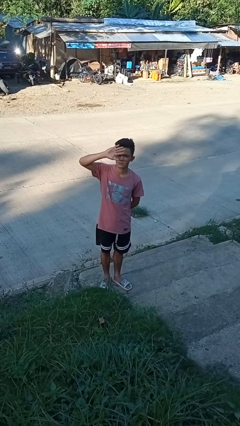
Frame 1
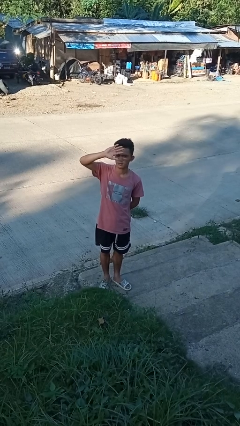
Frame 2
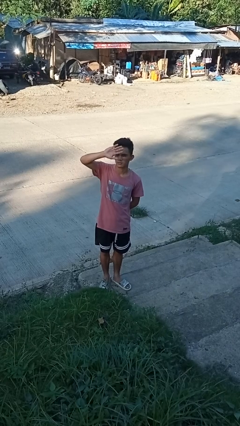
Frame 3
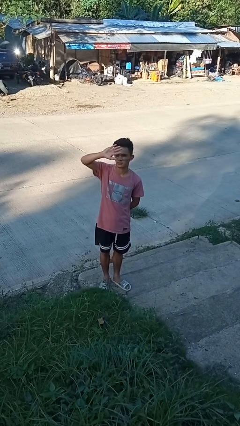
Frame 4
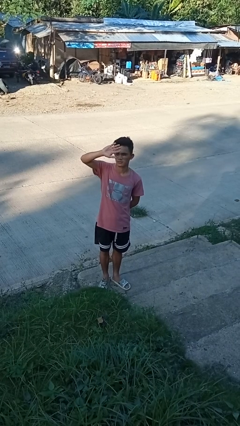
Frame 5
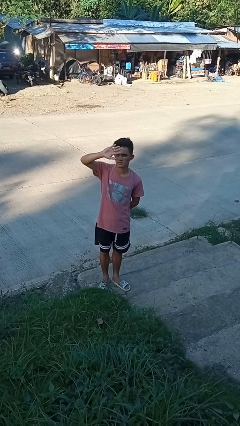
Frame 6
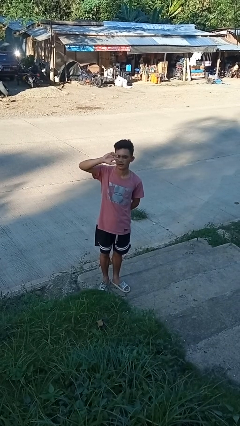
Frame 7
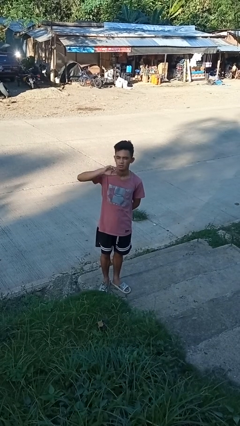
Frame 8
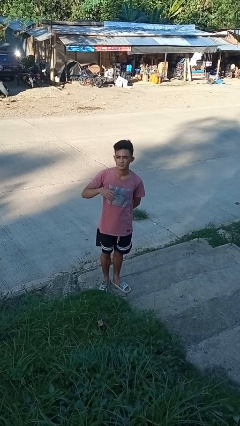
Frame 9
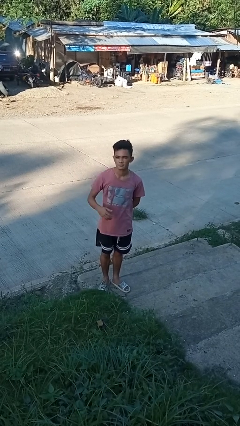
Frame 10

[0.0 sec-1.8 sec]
person shades eyes

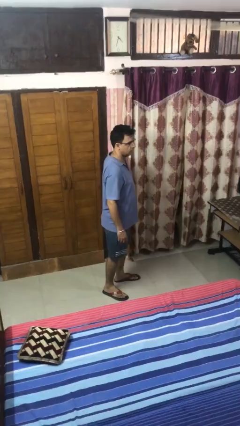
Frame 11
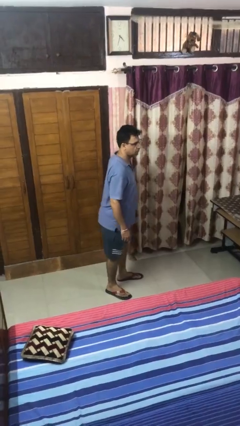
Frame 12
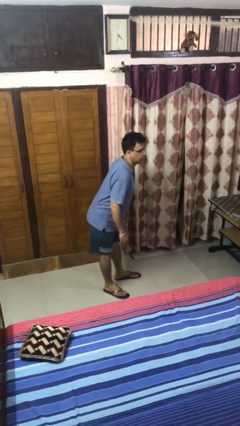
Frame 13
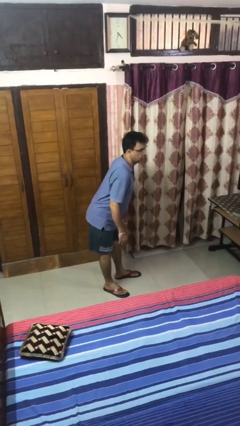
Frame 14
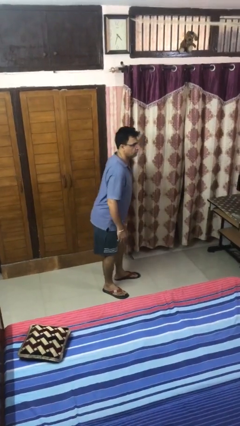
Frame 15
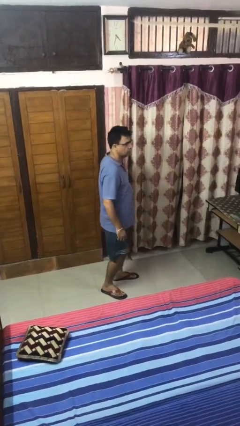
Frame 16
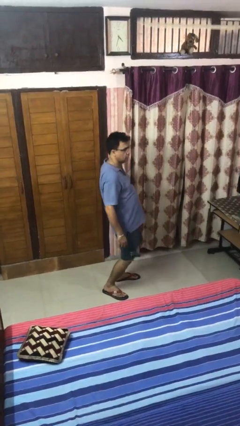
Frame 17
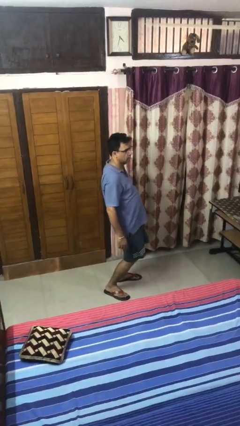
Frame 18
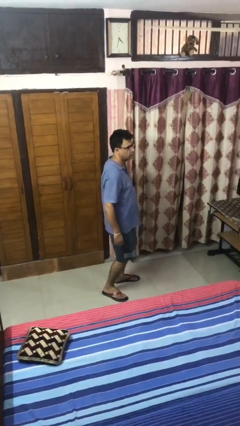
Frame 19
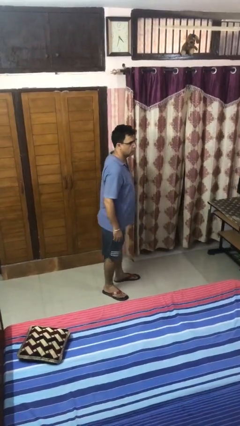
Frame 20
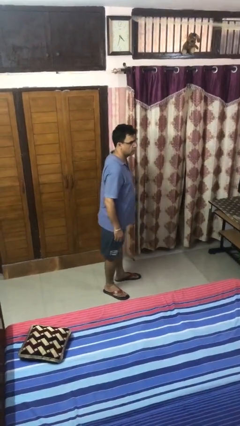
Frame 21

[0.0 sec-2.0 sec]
person wiggles hips

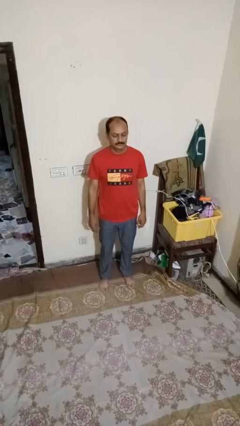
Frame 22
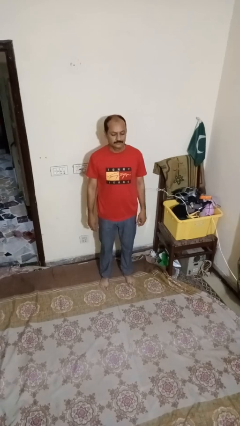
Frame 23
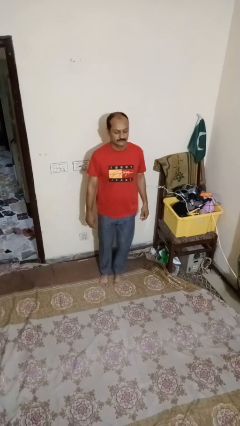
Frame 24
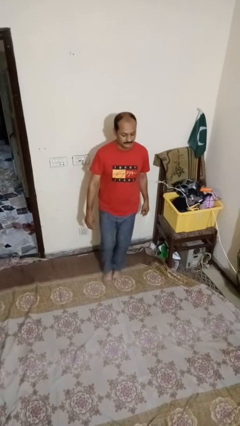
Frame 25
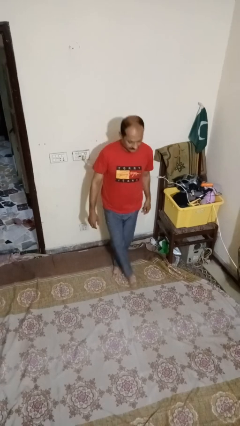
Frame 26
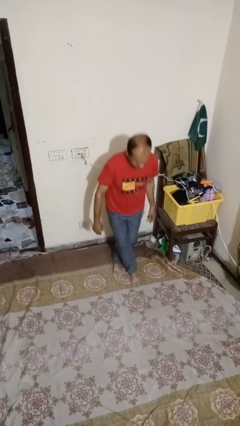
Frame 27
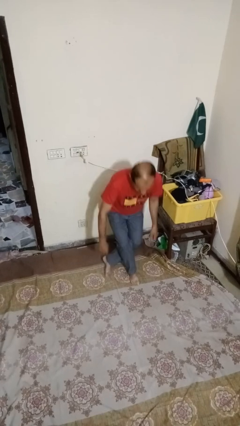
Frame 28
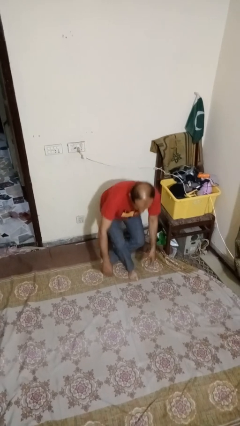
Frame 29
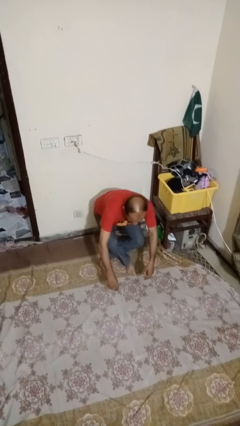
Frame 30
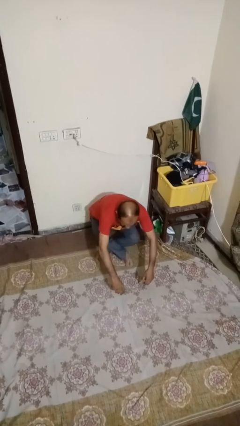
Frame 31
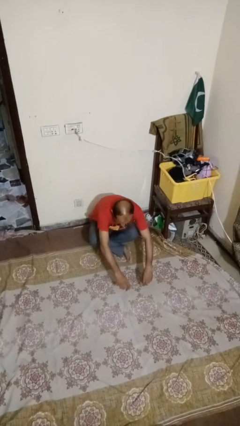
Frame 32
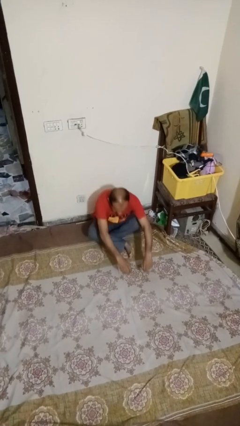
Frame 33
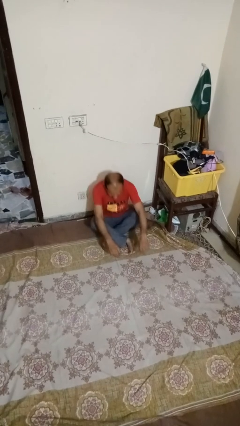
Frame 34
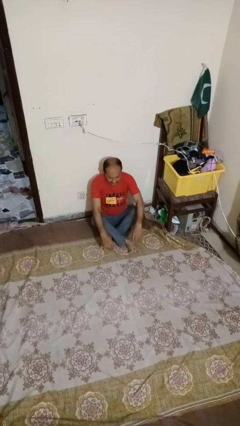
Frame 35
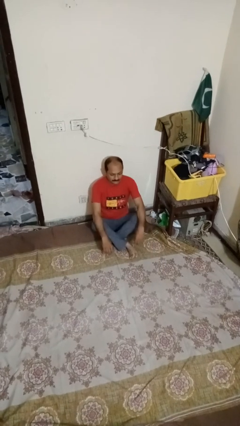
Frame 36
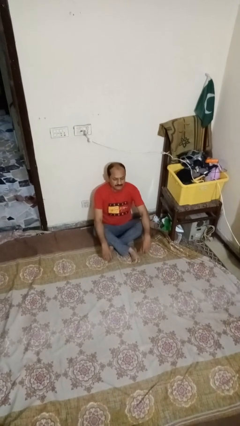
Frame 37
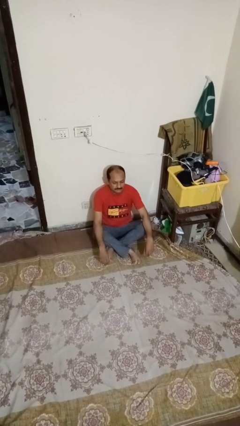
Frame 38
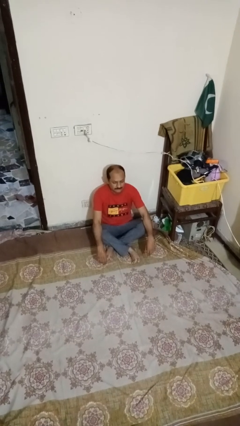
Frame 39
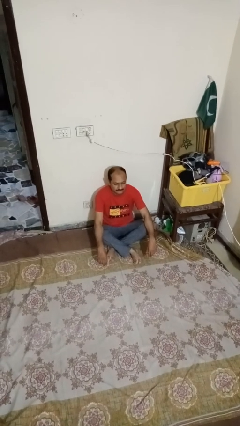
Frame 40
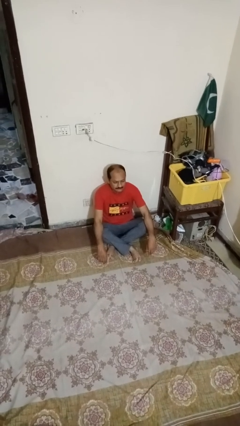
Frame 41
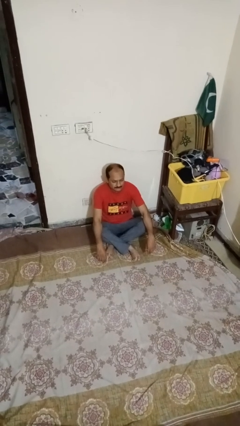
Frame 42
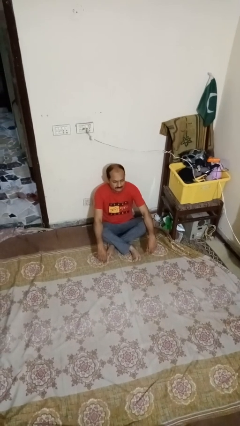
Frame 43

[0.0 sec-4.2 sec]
person sits crisscross

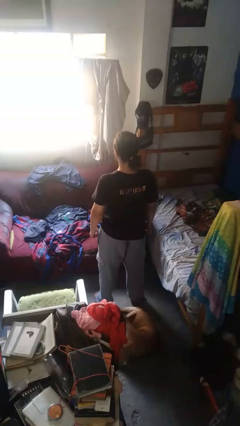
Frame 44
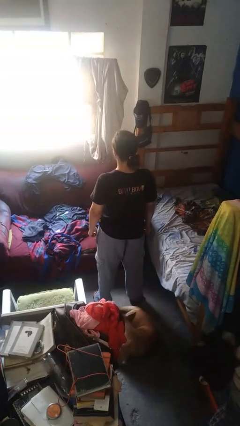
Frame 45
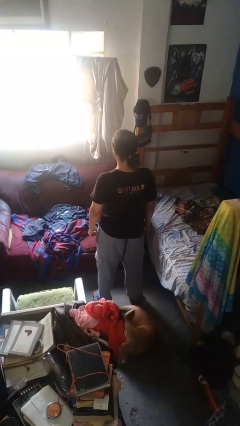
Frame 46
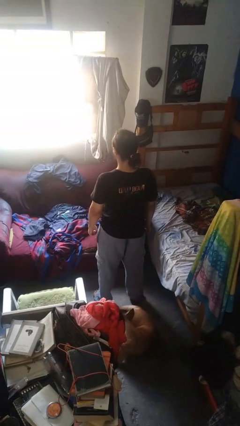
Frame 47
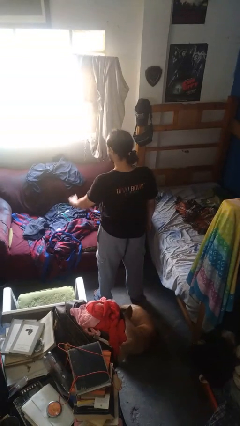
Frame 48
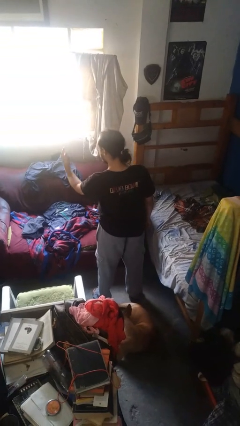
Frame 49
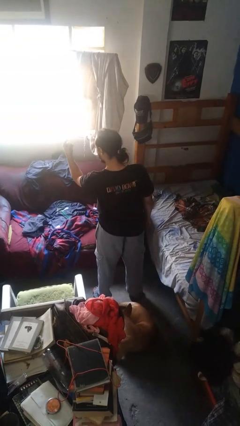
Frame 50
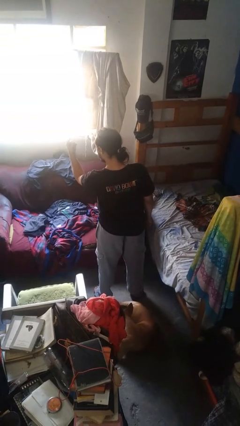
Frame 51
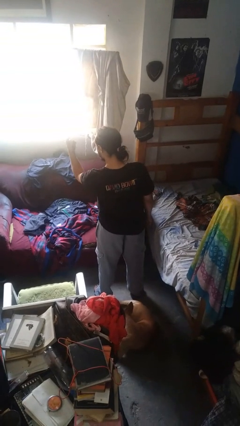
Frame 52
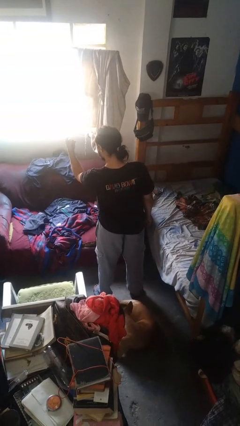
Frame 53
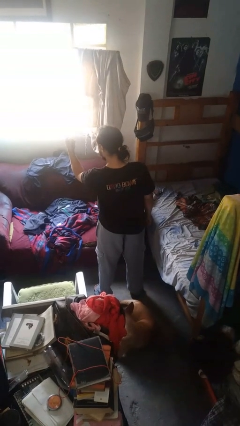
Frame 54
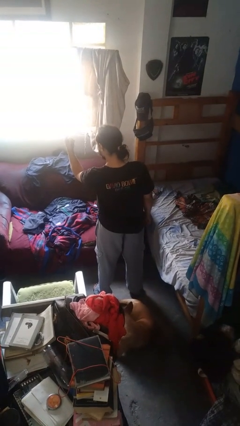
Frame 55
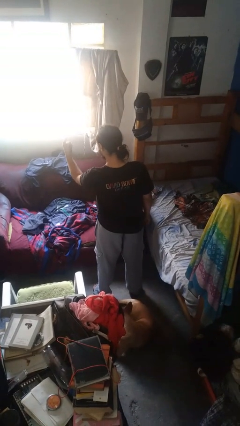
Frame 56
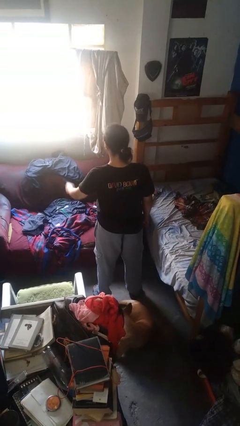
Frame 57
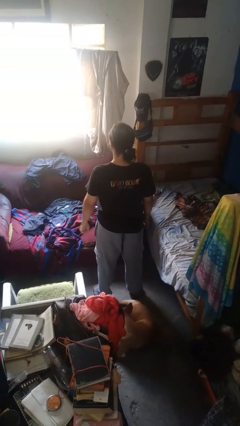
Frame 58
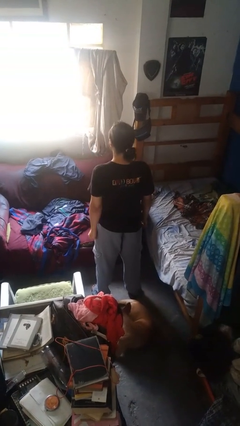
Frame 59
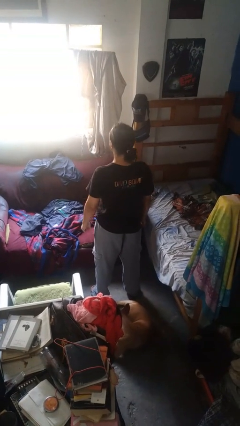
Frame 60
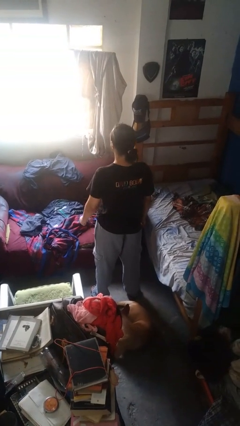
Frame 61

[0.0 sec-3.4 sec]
person gestures number one

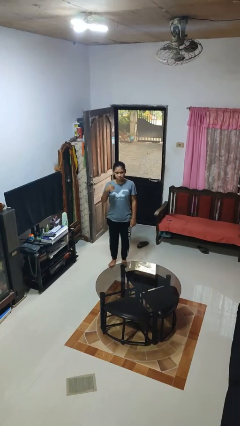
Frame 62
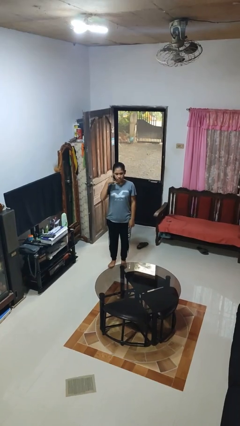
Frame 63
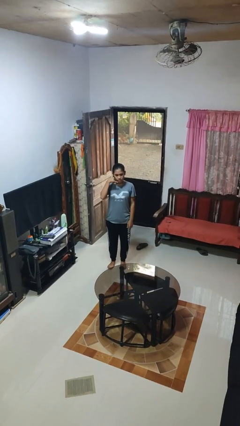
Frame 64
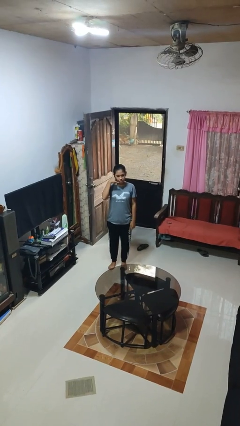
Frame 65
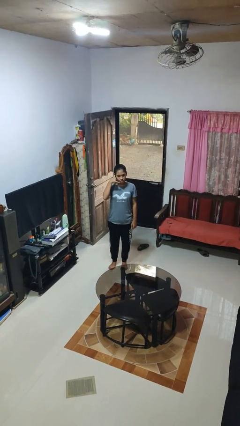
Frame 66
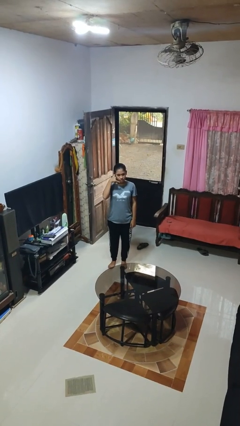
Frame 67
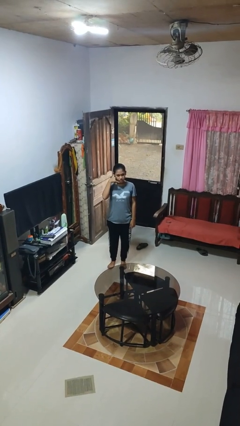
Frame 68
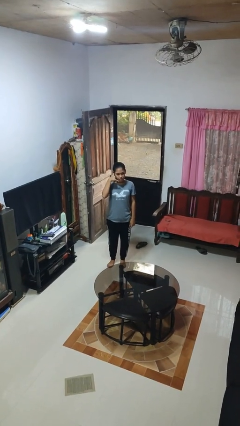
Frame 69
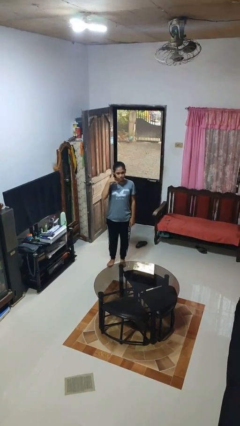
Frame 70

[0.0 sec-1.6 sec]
person gestures call me

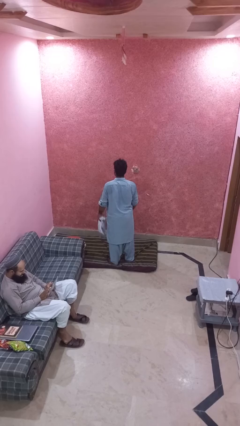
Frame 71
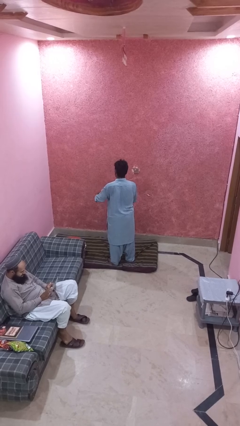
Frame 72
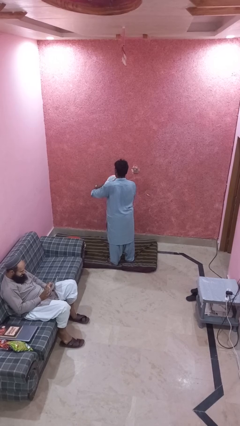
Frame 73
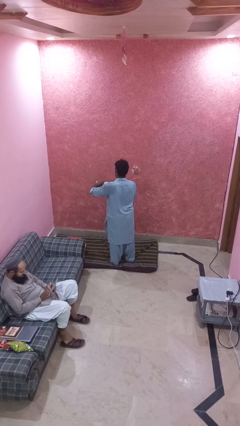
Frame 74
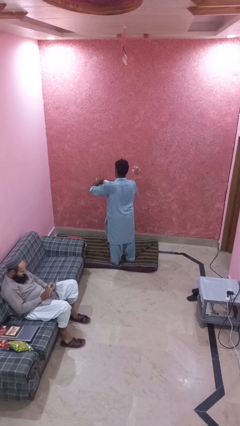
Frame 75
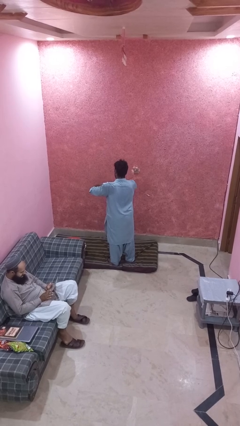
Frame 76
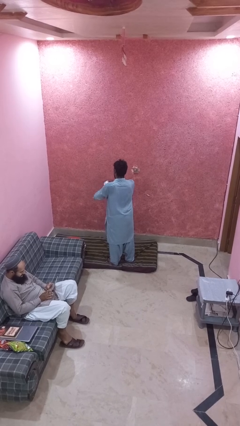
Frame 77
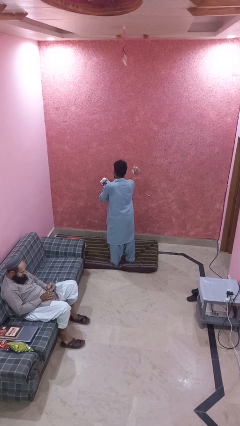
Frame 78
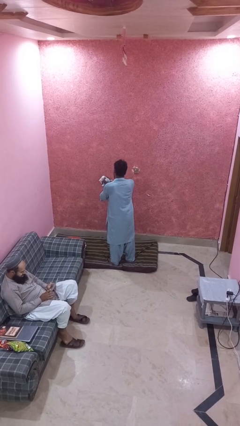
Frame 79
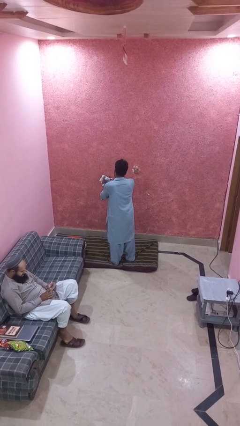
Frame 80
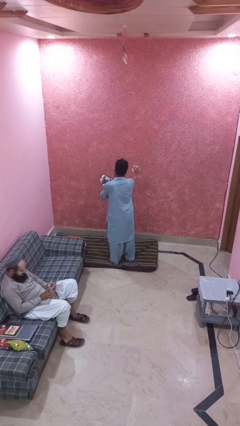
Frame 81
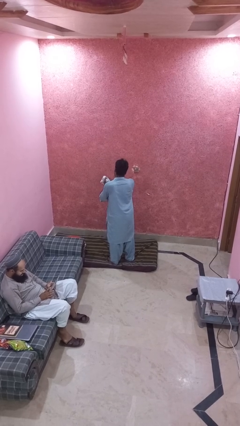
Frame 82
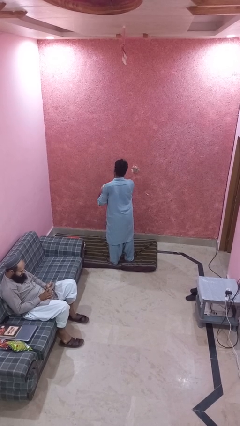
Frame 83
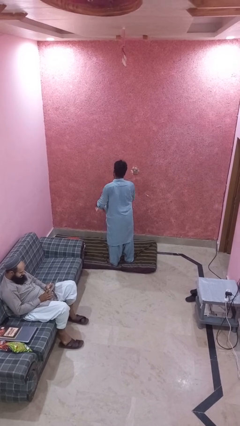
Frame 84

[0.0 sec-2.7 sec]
person squeezes object

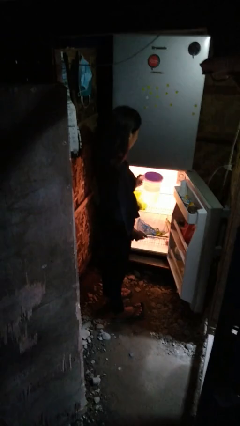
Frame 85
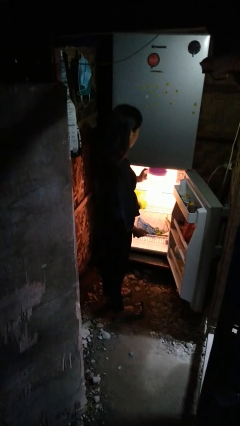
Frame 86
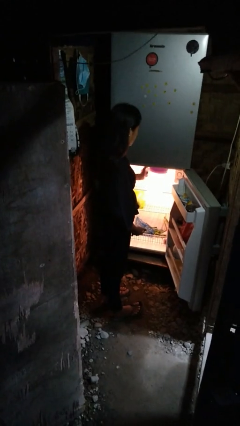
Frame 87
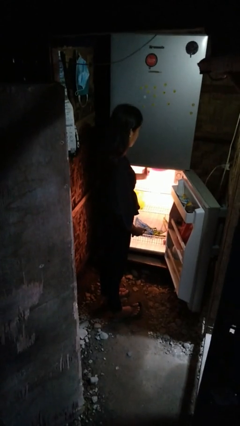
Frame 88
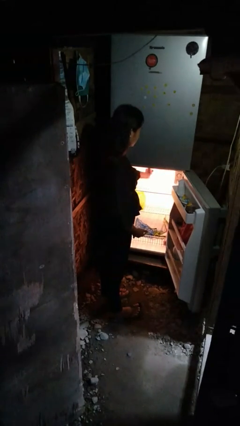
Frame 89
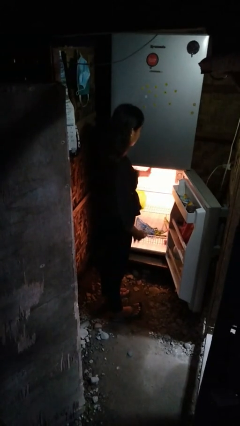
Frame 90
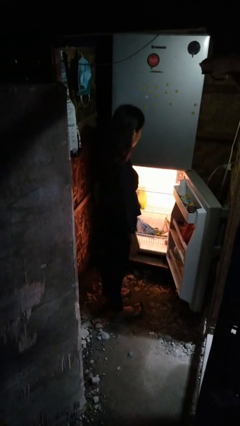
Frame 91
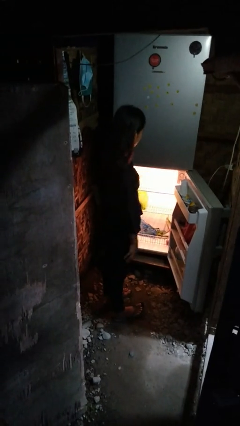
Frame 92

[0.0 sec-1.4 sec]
person puts object into refrigerator
